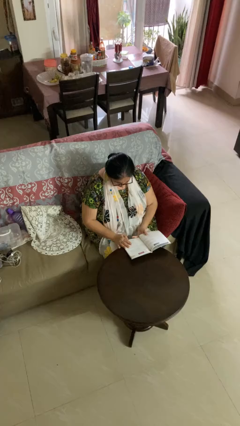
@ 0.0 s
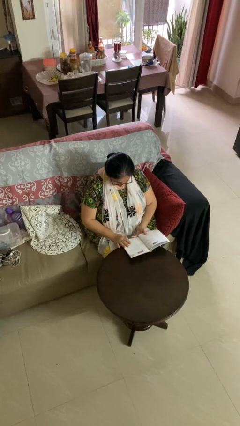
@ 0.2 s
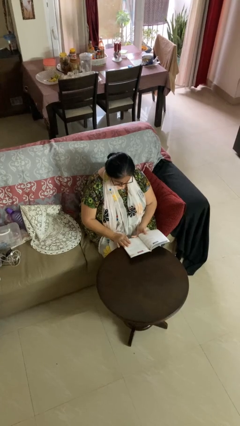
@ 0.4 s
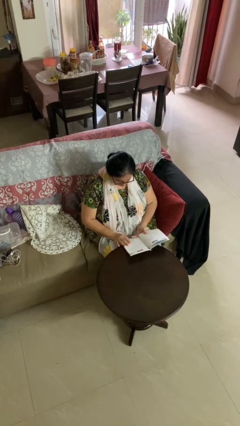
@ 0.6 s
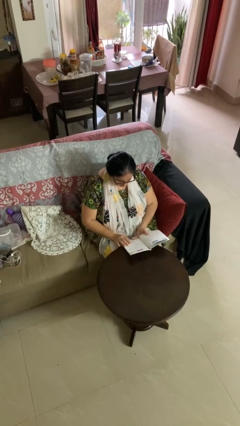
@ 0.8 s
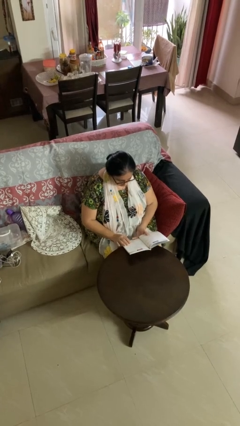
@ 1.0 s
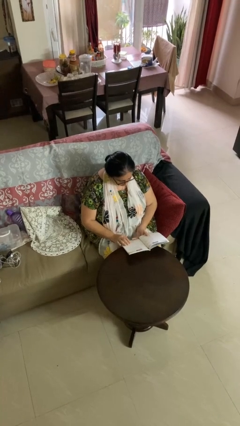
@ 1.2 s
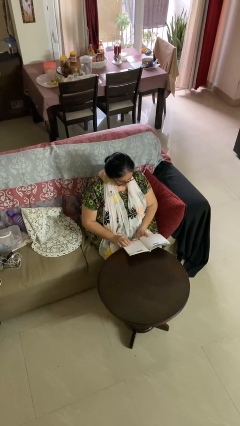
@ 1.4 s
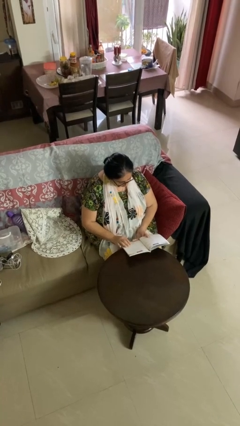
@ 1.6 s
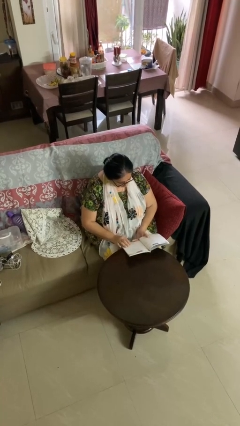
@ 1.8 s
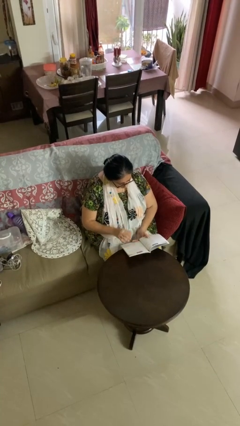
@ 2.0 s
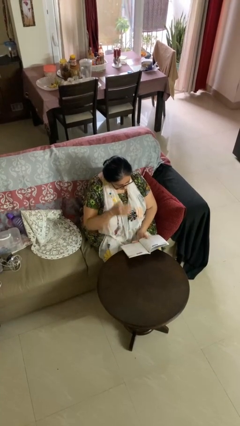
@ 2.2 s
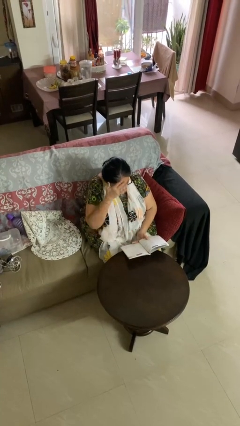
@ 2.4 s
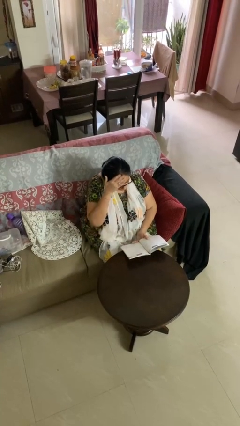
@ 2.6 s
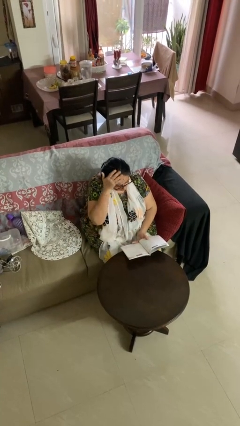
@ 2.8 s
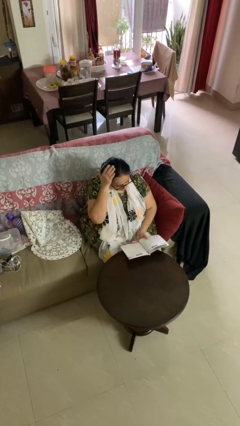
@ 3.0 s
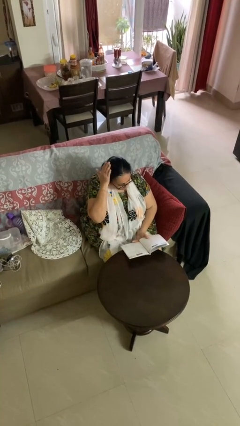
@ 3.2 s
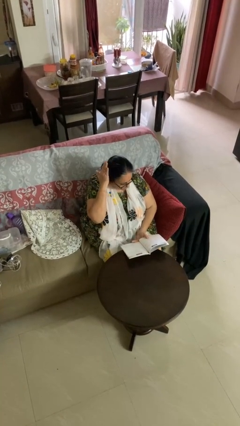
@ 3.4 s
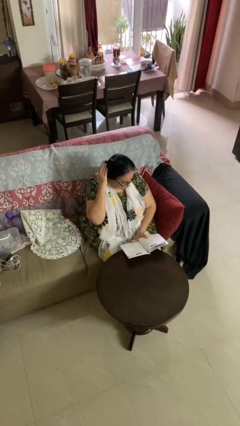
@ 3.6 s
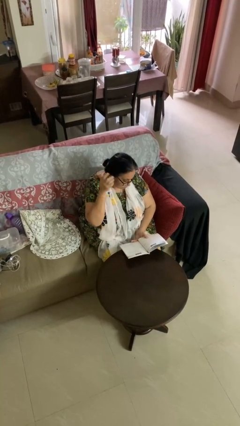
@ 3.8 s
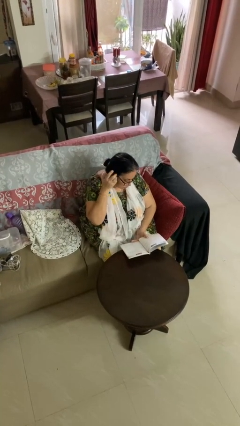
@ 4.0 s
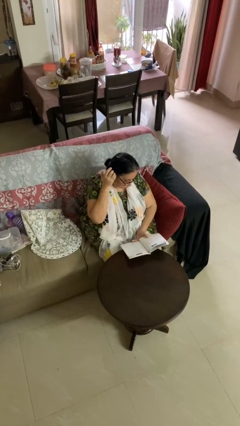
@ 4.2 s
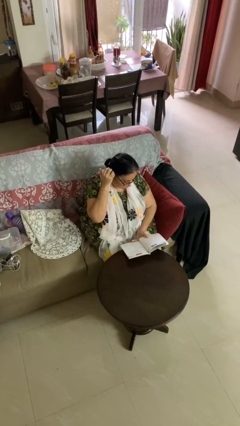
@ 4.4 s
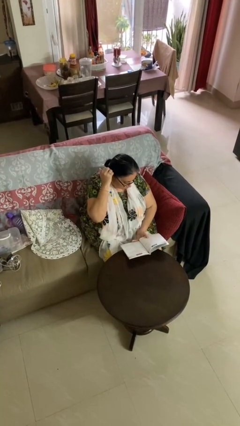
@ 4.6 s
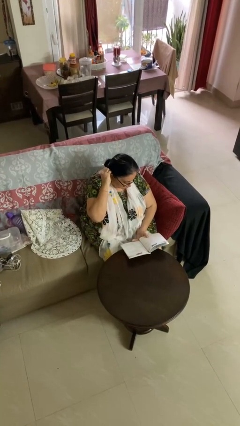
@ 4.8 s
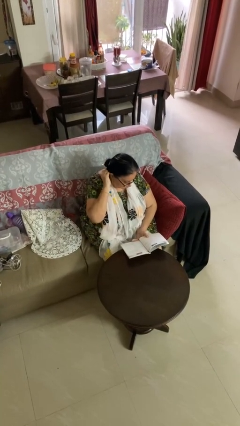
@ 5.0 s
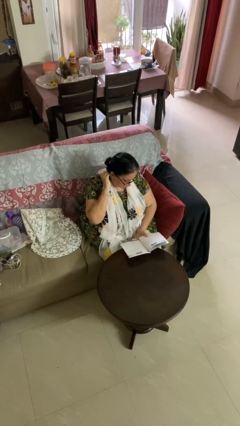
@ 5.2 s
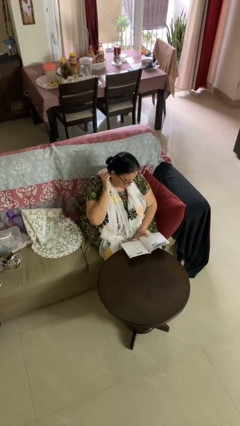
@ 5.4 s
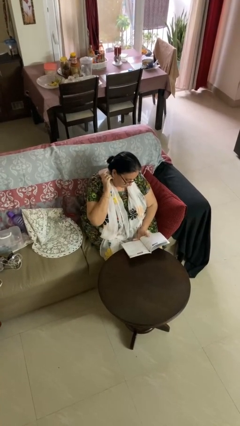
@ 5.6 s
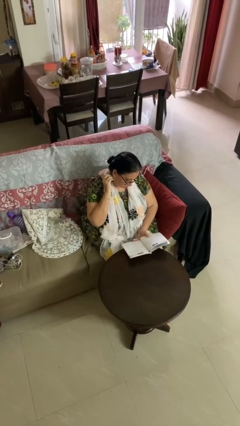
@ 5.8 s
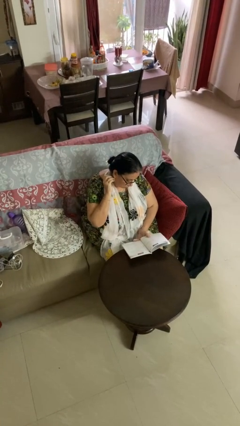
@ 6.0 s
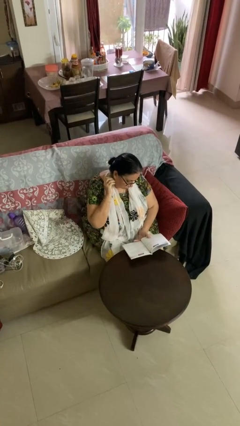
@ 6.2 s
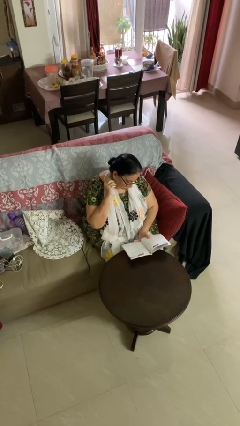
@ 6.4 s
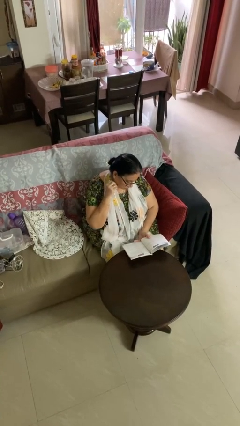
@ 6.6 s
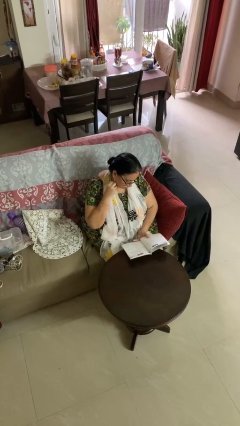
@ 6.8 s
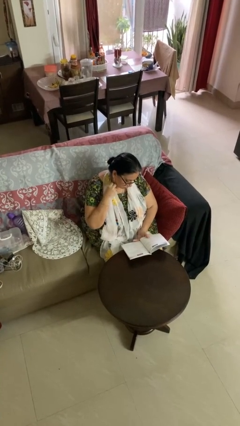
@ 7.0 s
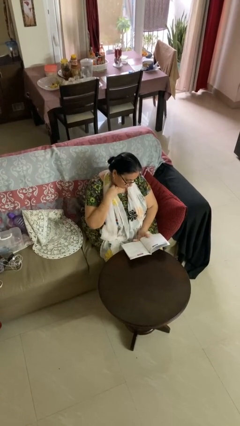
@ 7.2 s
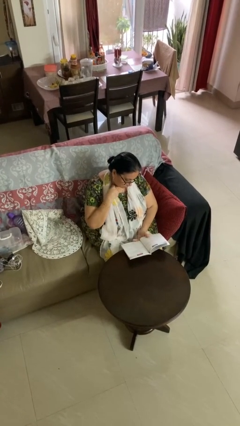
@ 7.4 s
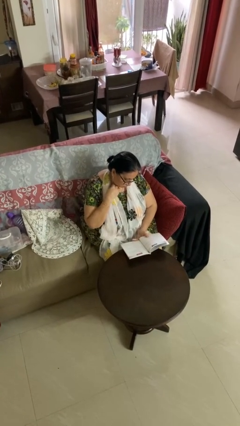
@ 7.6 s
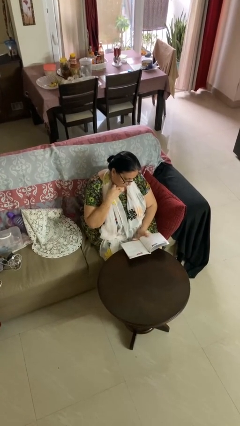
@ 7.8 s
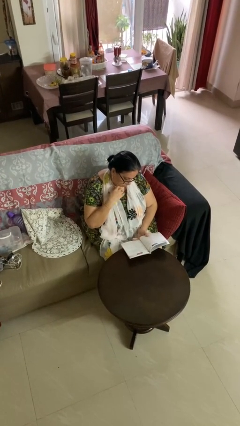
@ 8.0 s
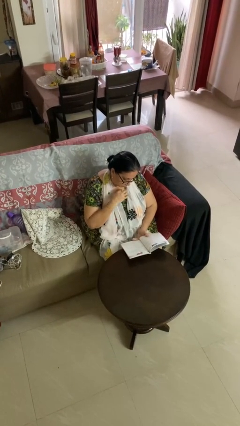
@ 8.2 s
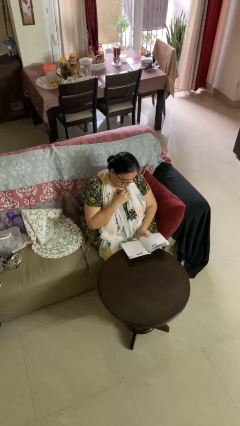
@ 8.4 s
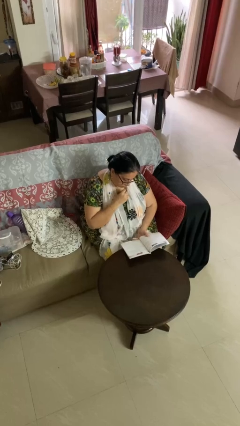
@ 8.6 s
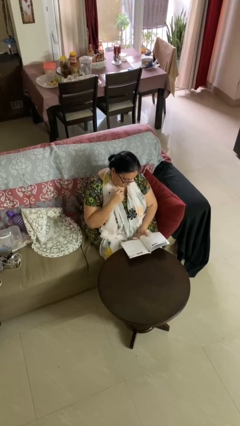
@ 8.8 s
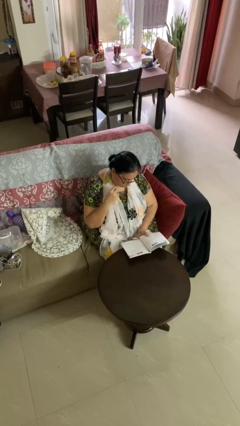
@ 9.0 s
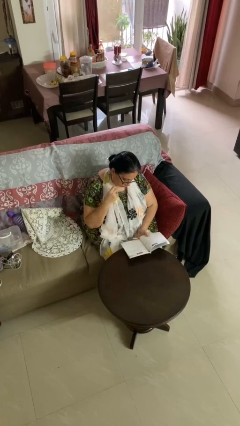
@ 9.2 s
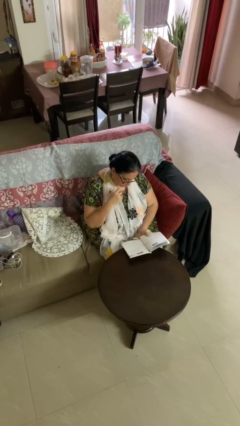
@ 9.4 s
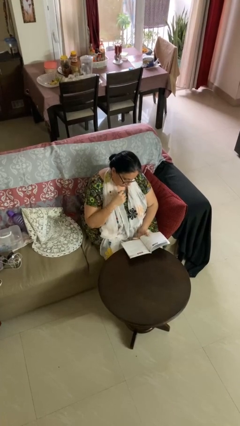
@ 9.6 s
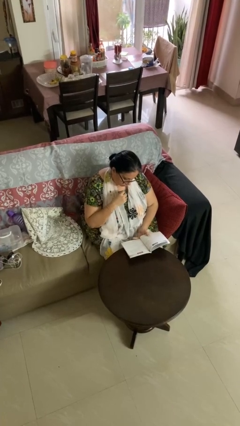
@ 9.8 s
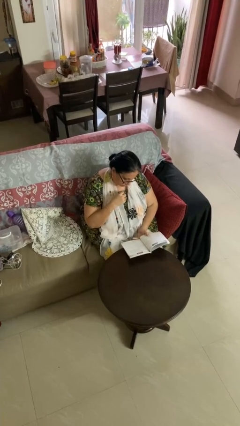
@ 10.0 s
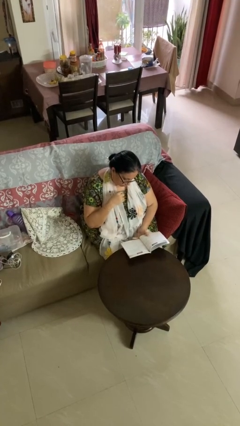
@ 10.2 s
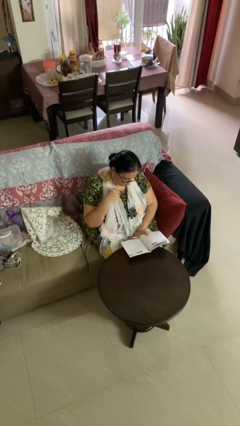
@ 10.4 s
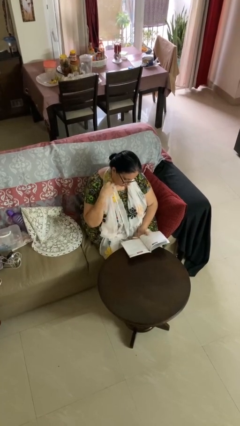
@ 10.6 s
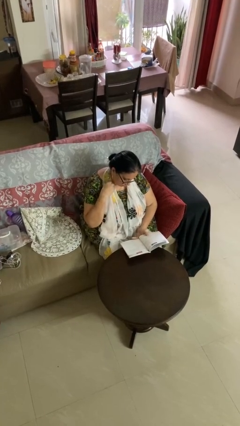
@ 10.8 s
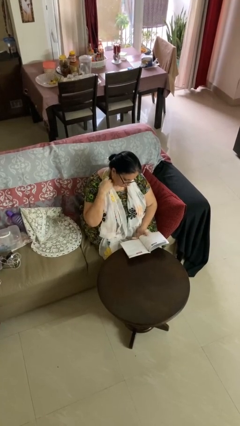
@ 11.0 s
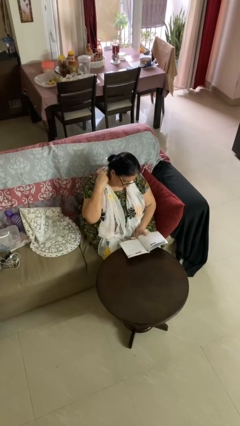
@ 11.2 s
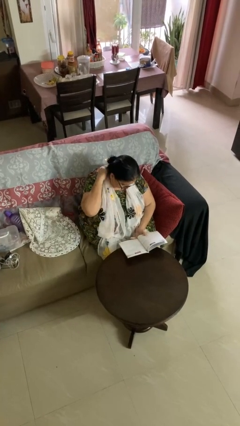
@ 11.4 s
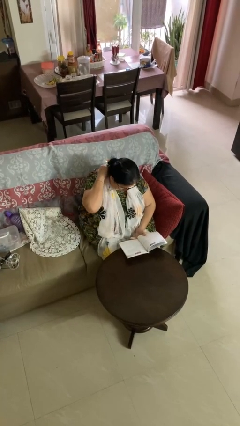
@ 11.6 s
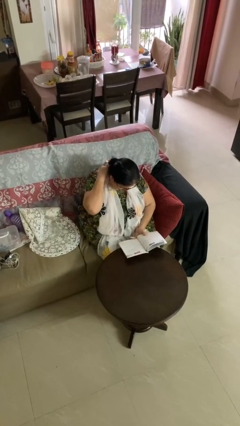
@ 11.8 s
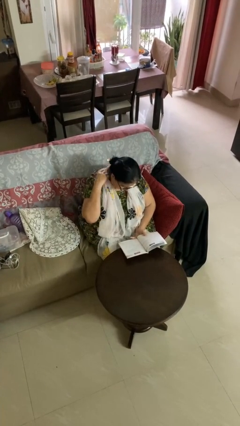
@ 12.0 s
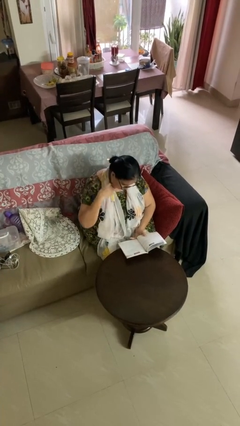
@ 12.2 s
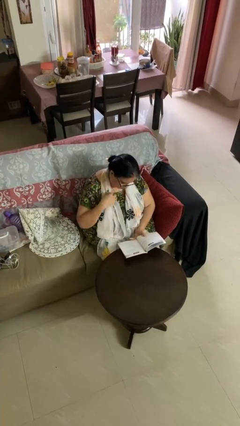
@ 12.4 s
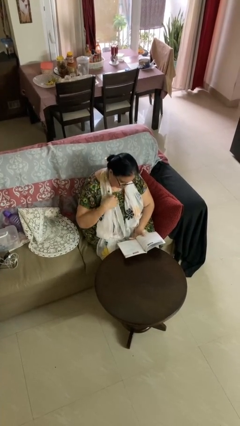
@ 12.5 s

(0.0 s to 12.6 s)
person reads document

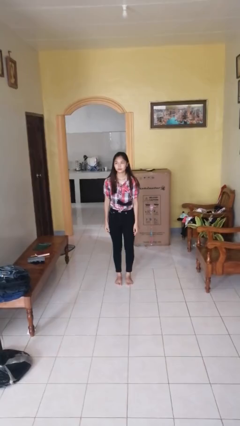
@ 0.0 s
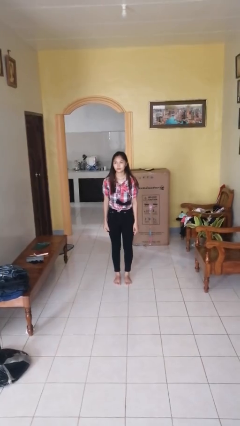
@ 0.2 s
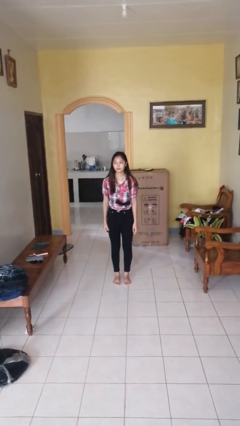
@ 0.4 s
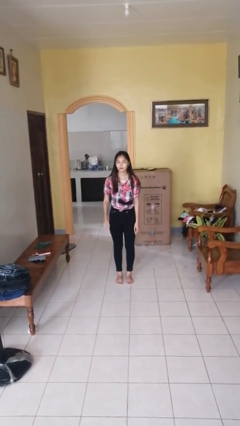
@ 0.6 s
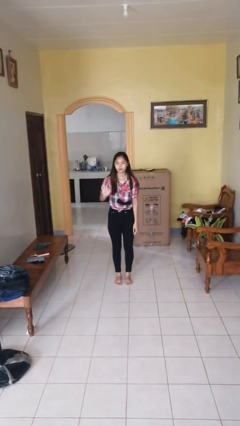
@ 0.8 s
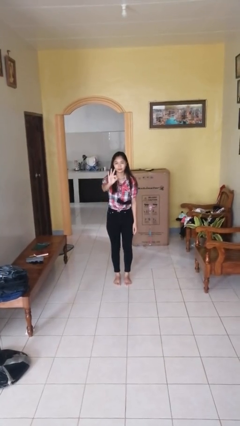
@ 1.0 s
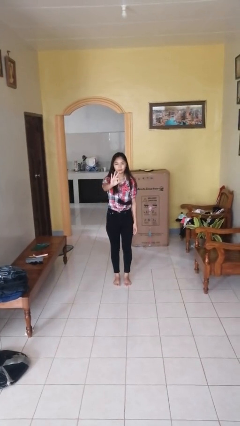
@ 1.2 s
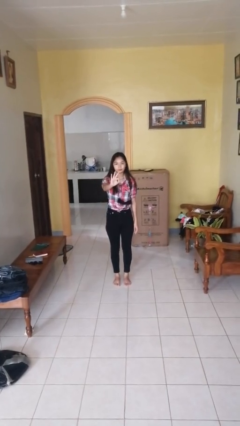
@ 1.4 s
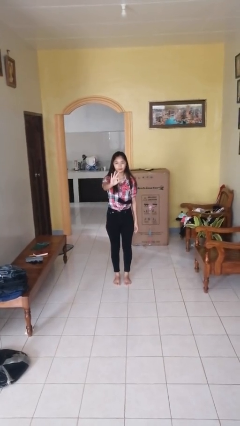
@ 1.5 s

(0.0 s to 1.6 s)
person gestures number three

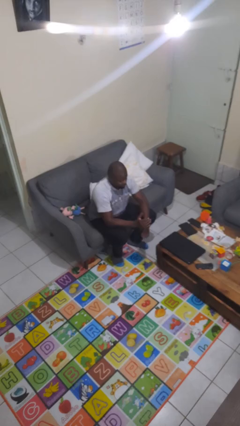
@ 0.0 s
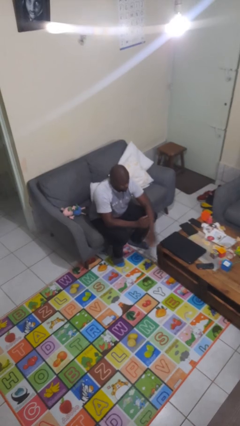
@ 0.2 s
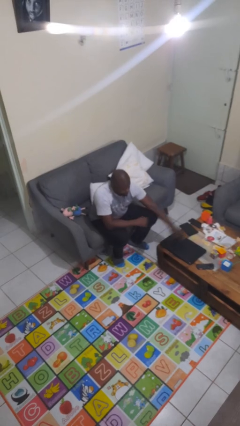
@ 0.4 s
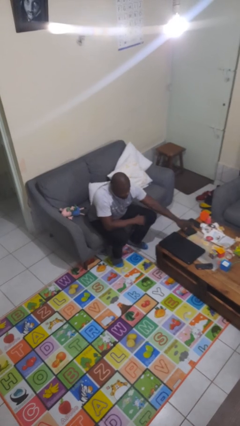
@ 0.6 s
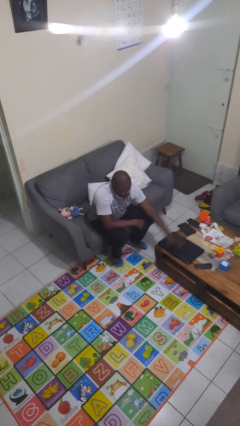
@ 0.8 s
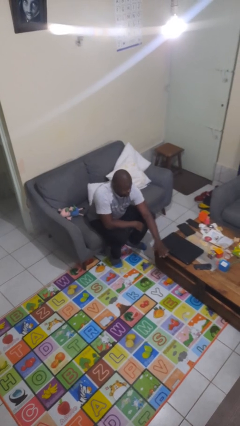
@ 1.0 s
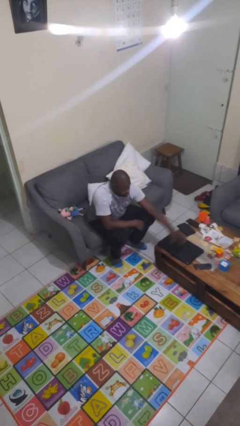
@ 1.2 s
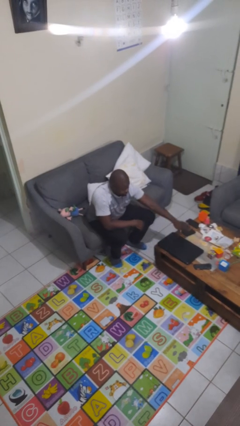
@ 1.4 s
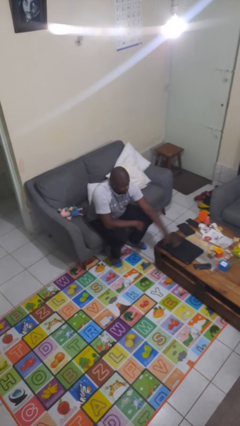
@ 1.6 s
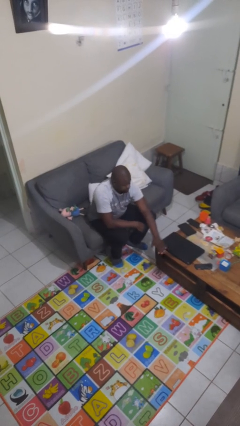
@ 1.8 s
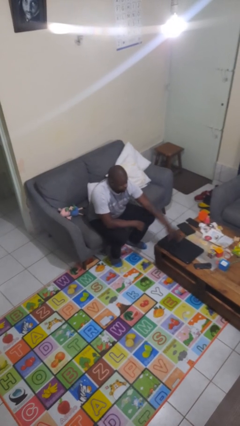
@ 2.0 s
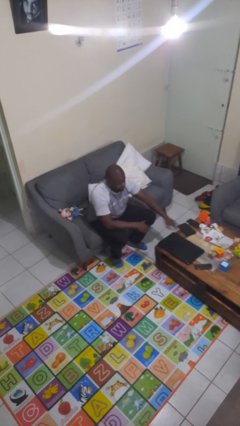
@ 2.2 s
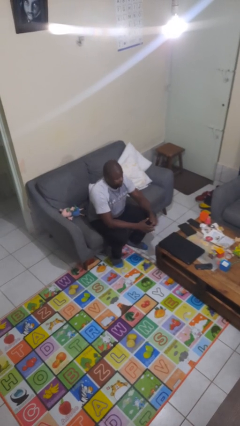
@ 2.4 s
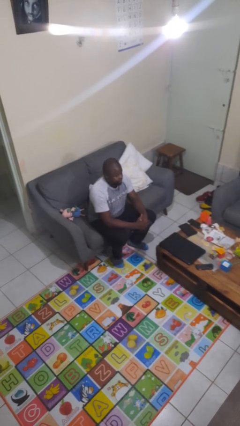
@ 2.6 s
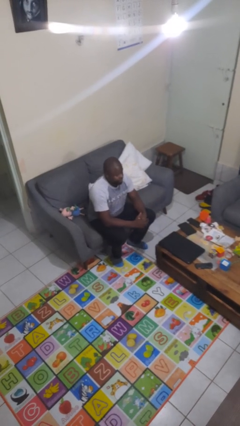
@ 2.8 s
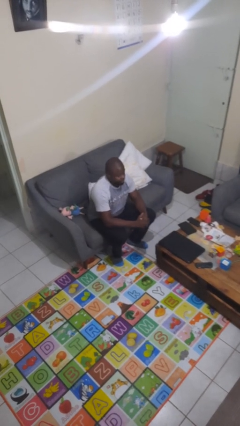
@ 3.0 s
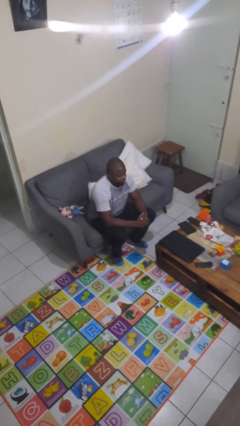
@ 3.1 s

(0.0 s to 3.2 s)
person waves hand over object
